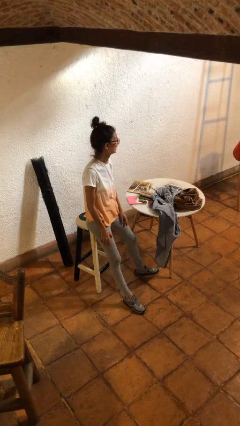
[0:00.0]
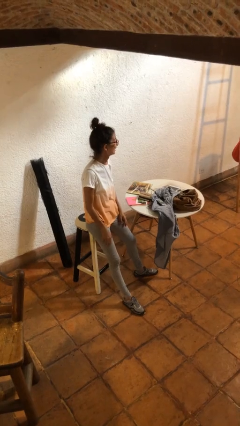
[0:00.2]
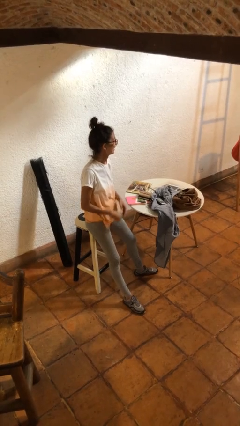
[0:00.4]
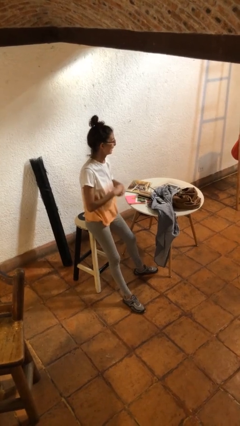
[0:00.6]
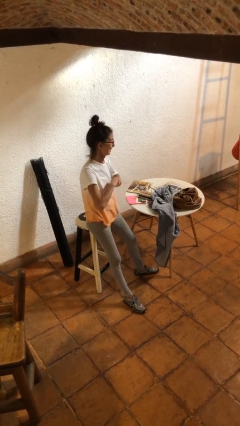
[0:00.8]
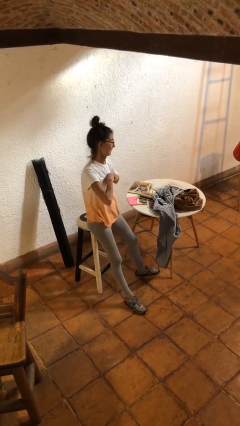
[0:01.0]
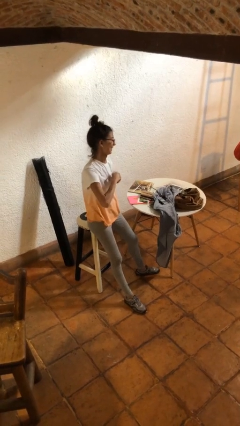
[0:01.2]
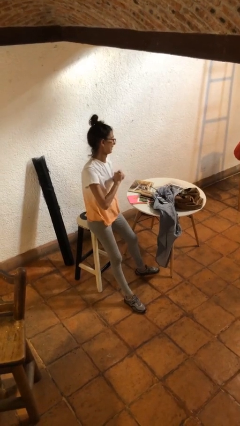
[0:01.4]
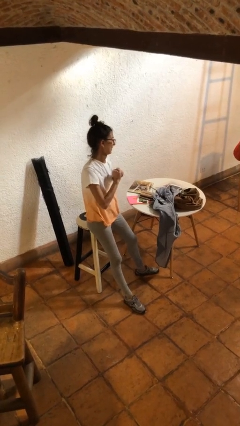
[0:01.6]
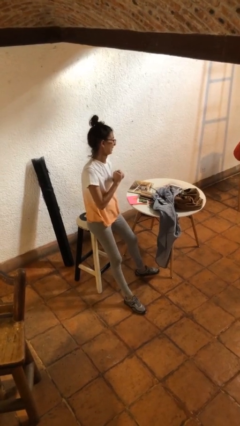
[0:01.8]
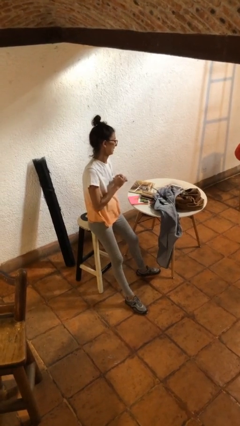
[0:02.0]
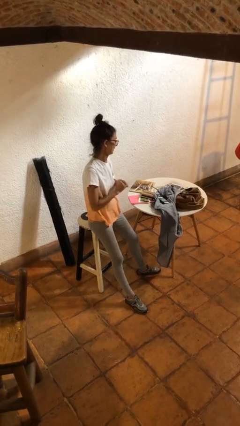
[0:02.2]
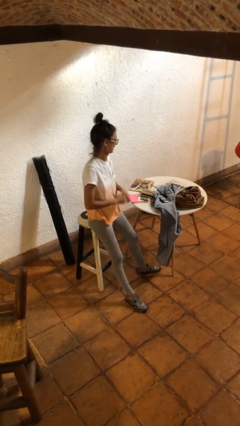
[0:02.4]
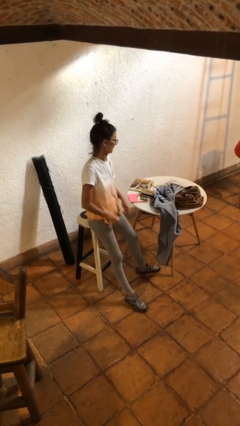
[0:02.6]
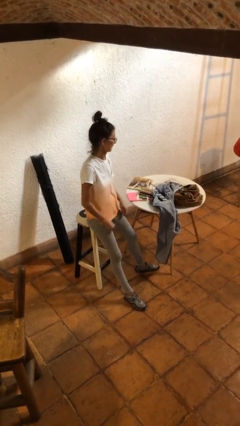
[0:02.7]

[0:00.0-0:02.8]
person cracks knuckles

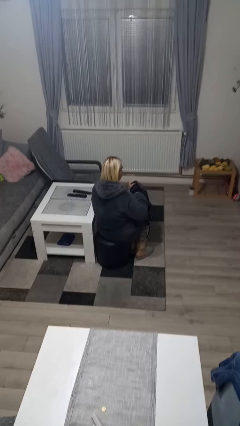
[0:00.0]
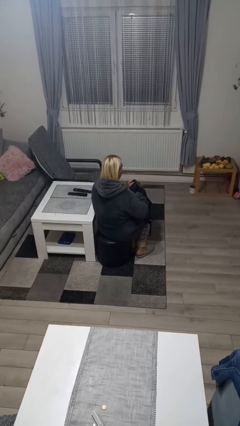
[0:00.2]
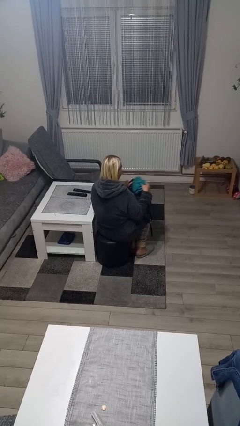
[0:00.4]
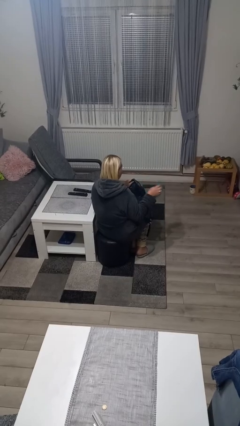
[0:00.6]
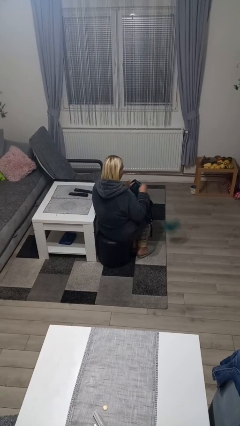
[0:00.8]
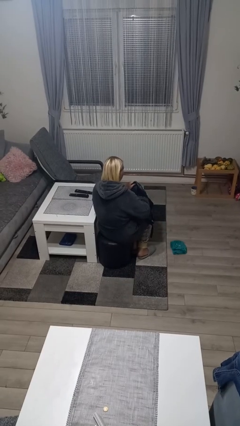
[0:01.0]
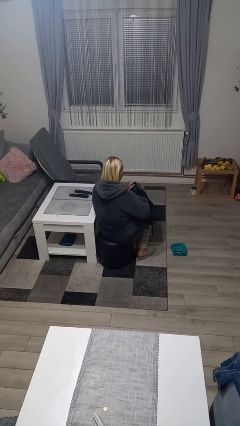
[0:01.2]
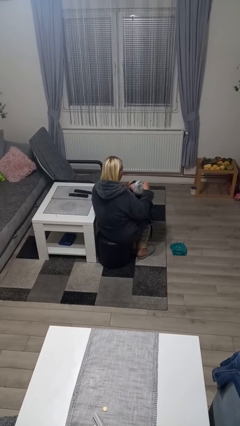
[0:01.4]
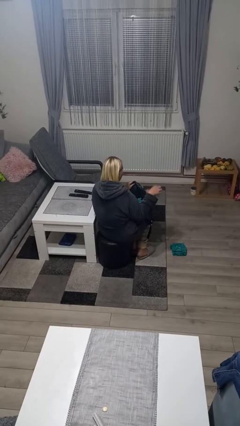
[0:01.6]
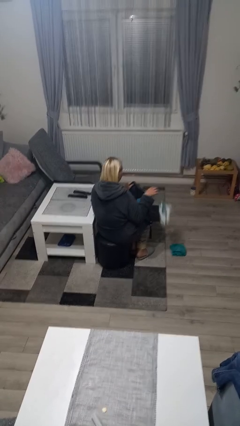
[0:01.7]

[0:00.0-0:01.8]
person searches in bag

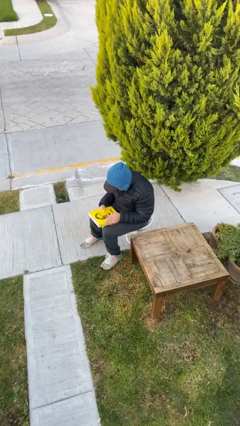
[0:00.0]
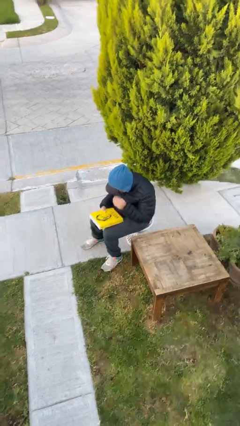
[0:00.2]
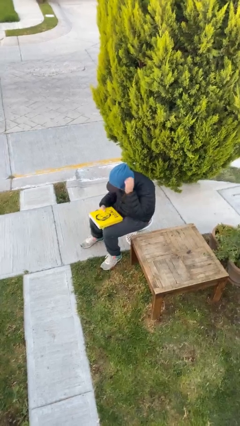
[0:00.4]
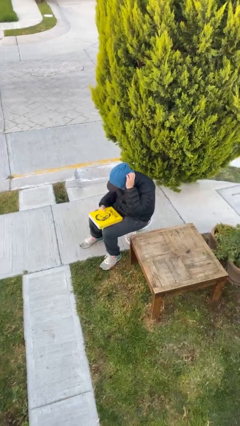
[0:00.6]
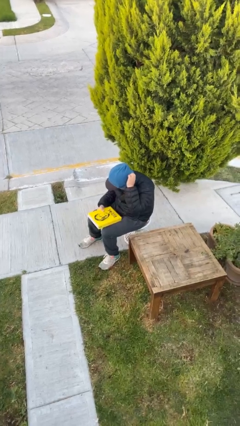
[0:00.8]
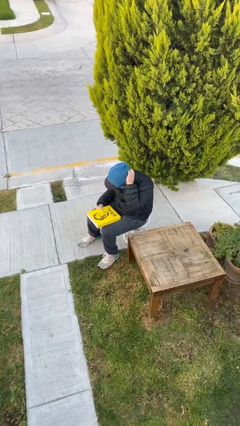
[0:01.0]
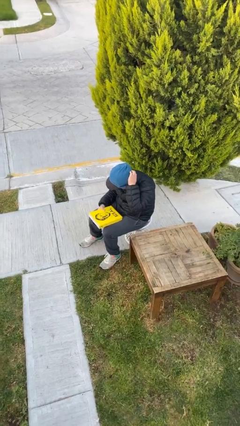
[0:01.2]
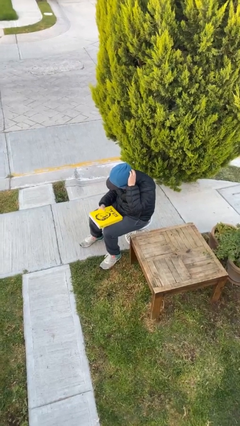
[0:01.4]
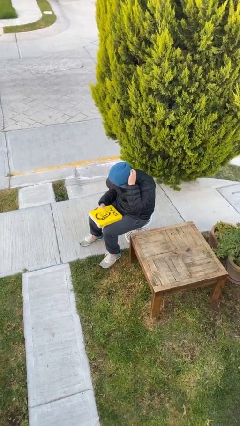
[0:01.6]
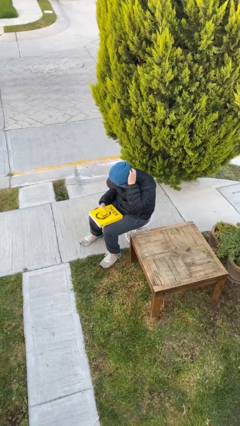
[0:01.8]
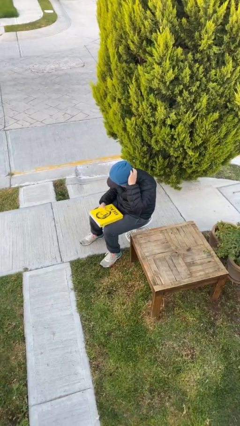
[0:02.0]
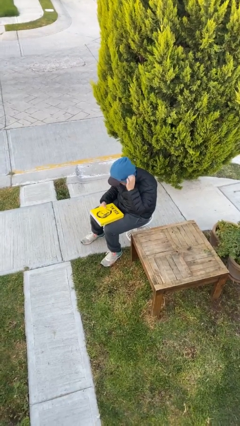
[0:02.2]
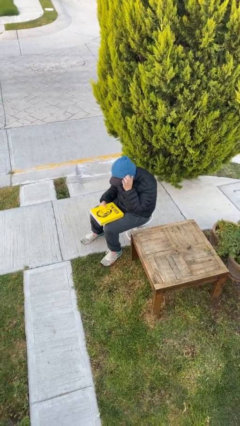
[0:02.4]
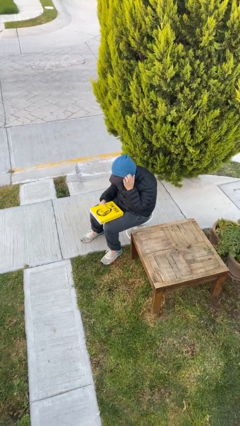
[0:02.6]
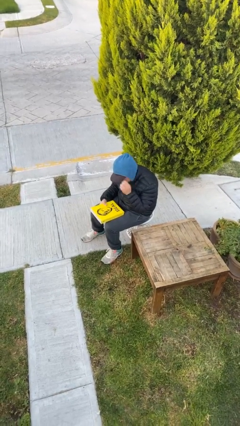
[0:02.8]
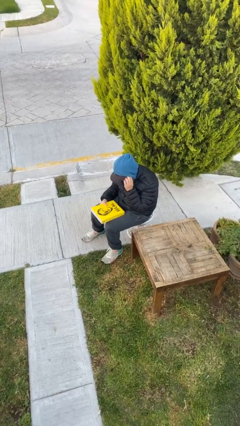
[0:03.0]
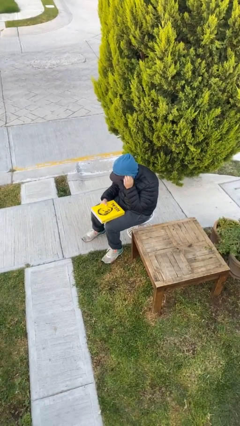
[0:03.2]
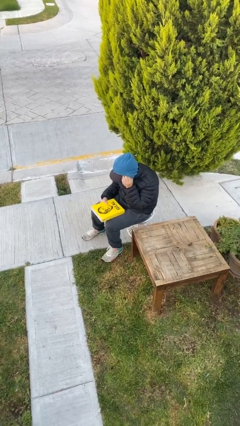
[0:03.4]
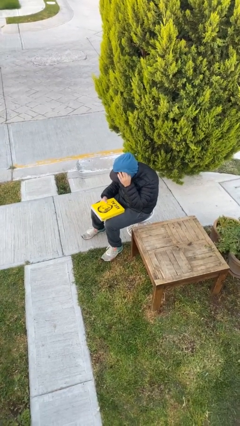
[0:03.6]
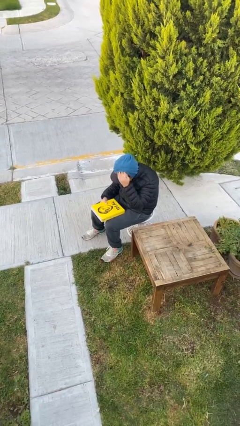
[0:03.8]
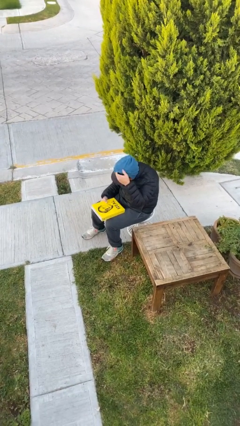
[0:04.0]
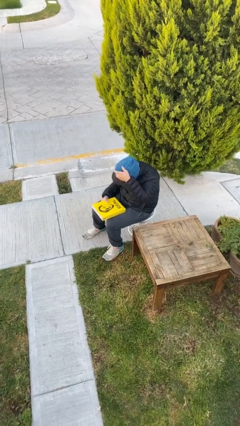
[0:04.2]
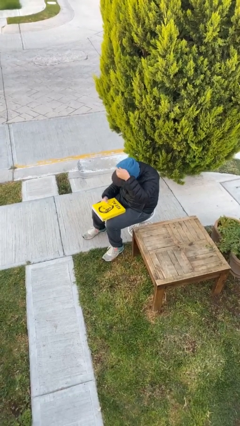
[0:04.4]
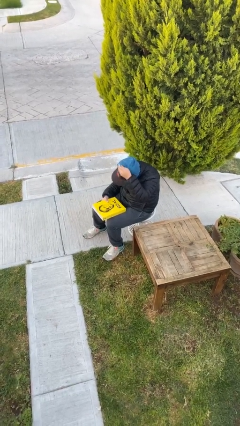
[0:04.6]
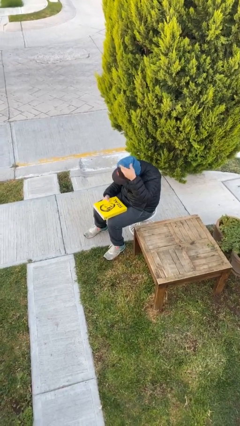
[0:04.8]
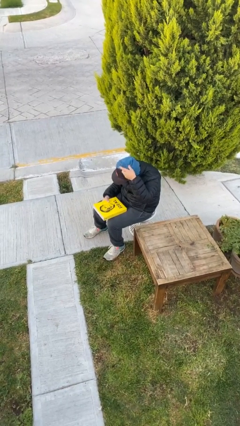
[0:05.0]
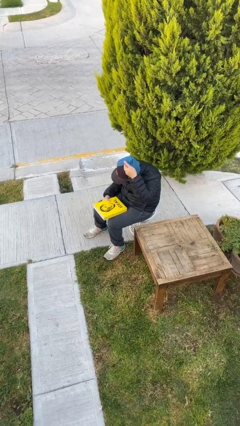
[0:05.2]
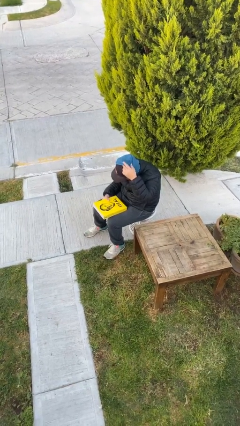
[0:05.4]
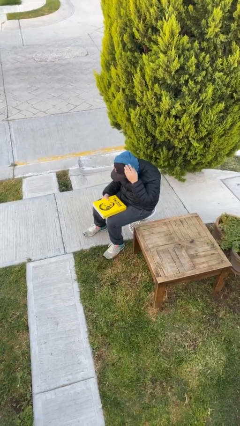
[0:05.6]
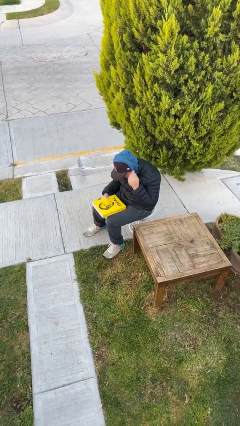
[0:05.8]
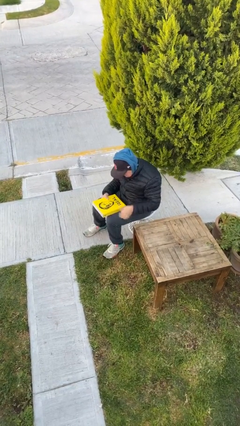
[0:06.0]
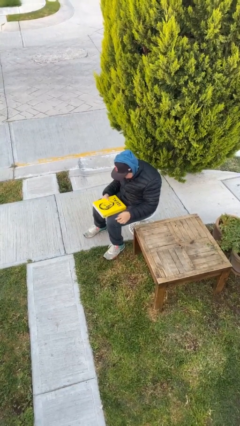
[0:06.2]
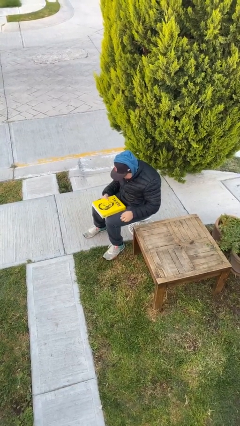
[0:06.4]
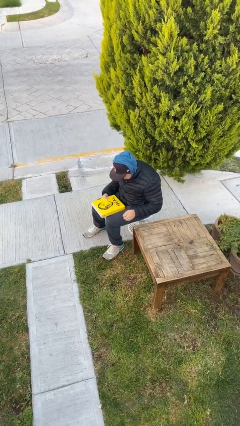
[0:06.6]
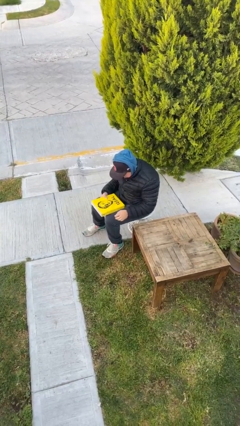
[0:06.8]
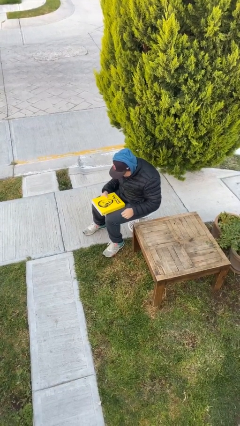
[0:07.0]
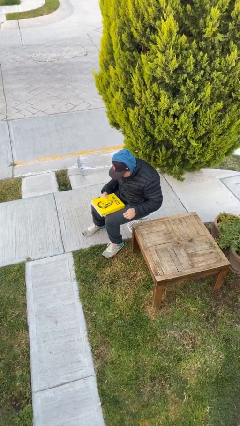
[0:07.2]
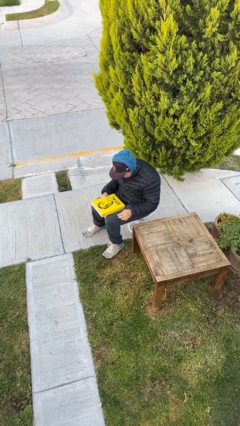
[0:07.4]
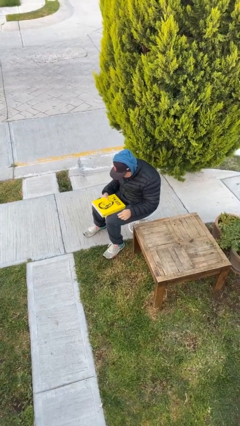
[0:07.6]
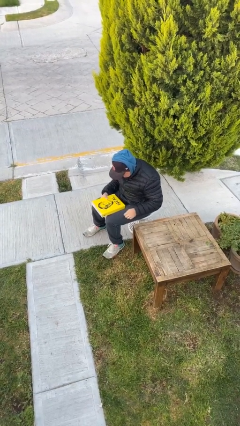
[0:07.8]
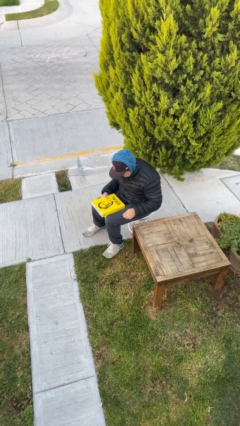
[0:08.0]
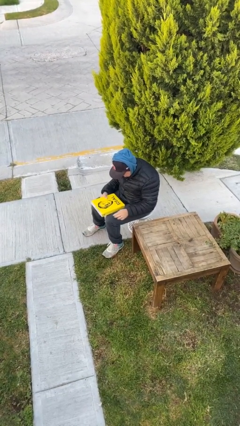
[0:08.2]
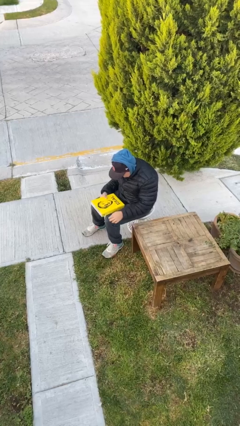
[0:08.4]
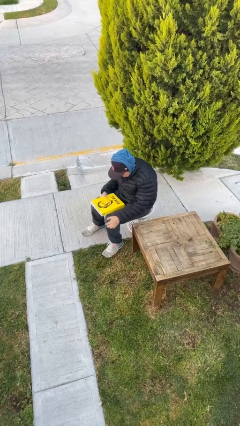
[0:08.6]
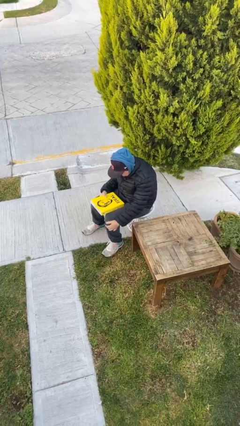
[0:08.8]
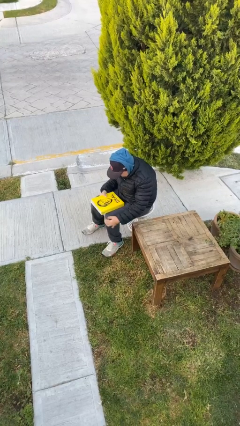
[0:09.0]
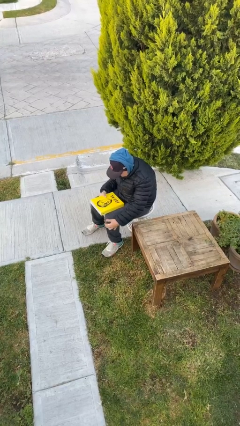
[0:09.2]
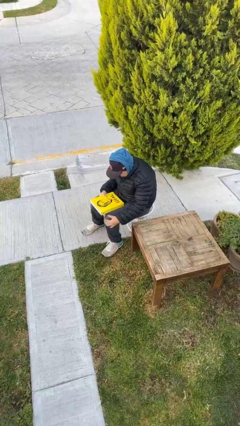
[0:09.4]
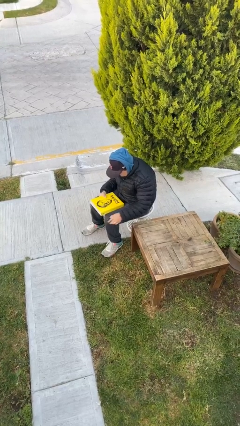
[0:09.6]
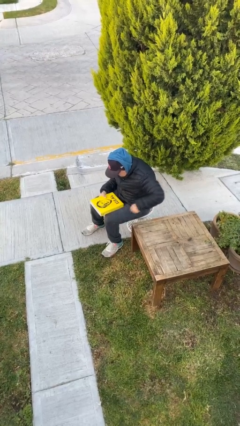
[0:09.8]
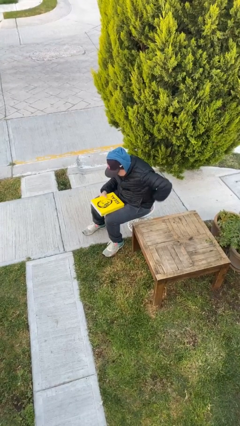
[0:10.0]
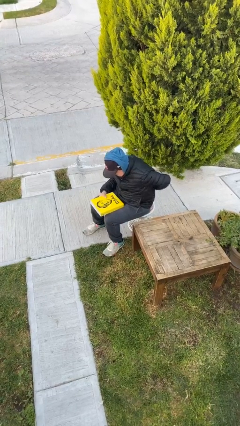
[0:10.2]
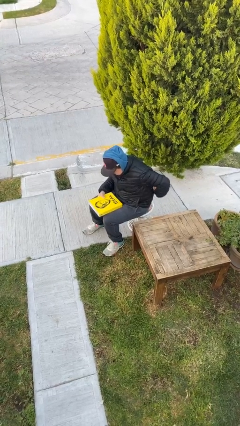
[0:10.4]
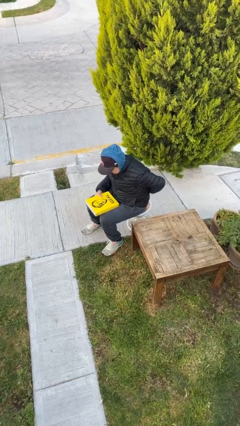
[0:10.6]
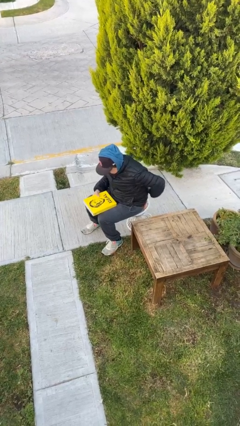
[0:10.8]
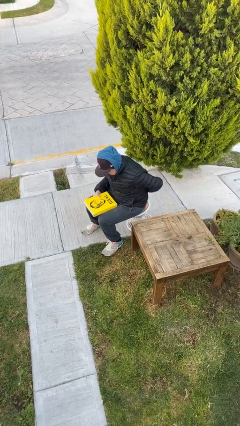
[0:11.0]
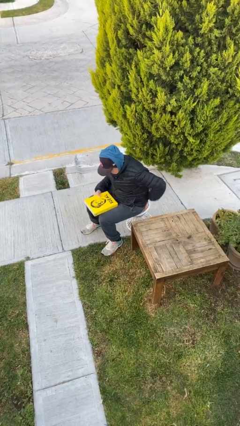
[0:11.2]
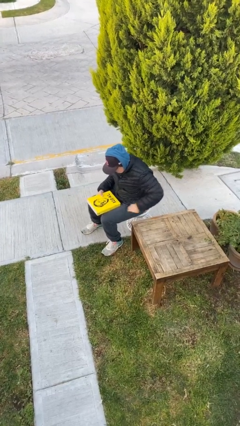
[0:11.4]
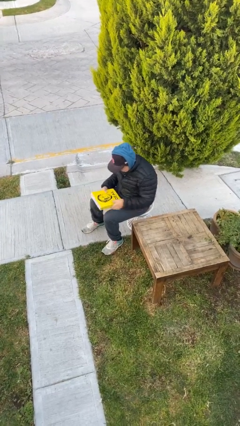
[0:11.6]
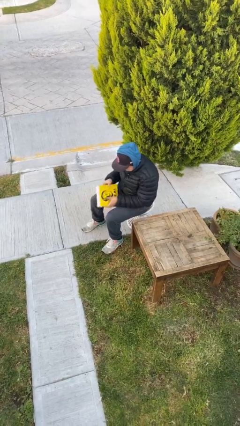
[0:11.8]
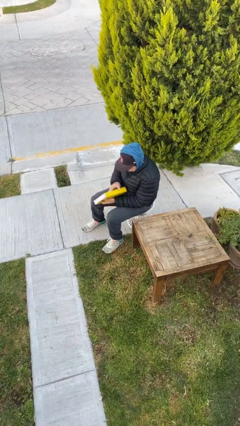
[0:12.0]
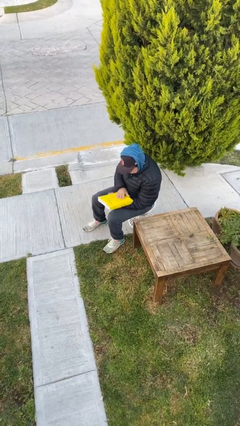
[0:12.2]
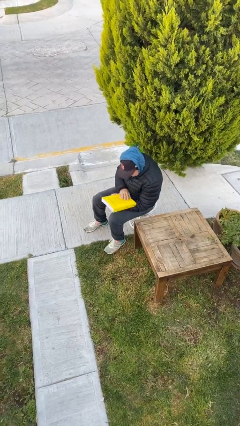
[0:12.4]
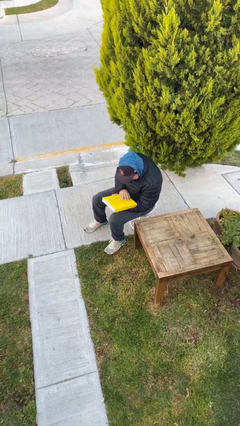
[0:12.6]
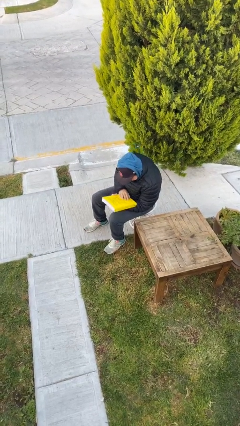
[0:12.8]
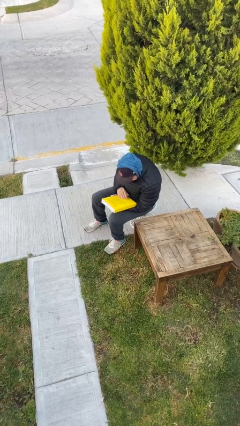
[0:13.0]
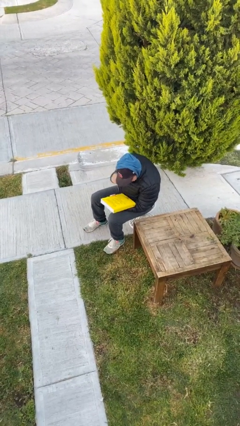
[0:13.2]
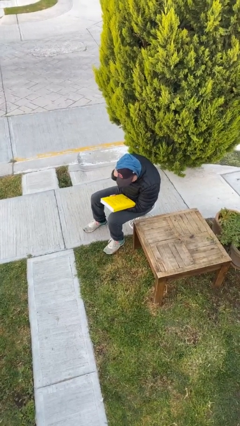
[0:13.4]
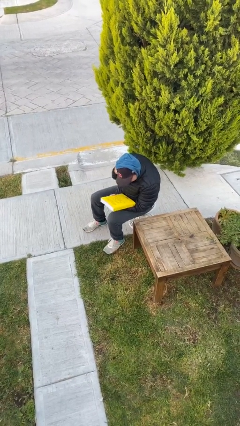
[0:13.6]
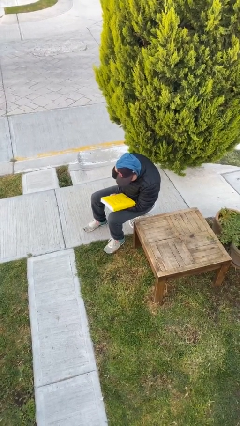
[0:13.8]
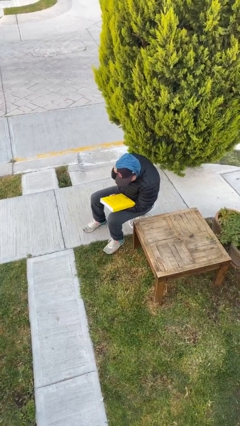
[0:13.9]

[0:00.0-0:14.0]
person reads document
